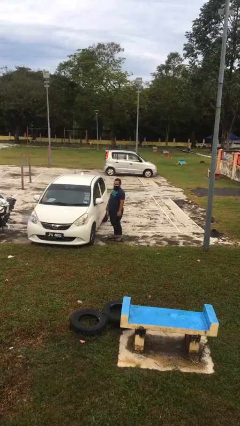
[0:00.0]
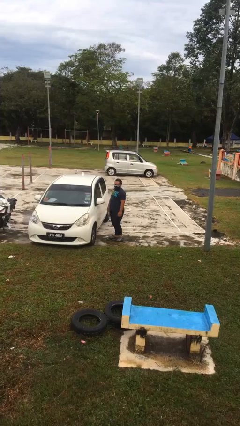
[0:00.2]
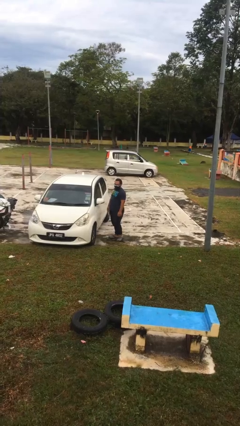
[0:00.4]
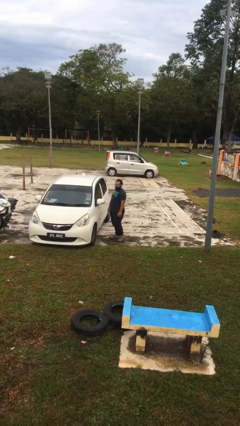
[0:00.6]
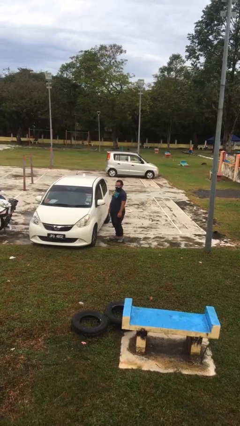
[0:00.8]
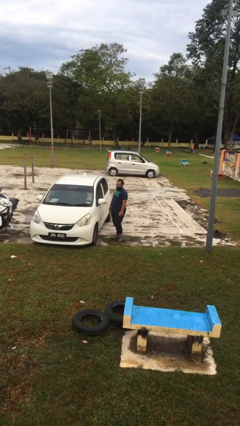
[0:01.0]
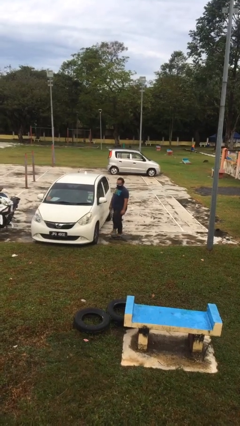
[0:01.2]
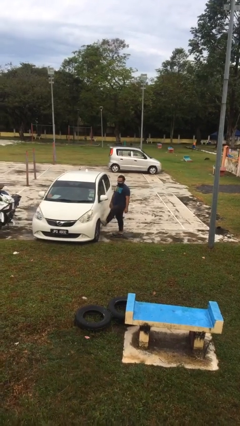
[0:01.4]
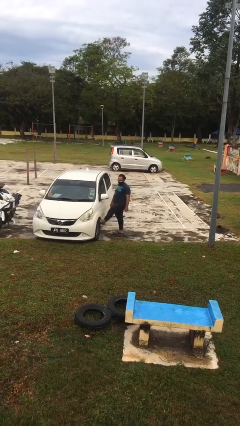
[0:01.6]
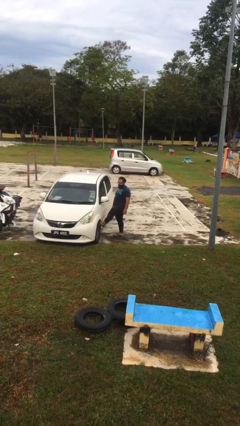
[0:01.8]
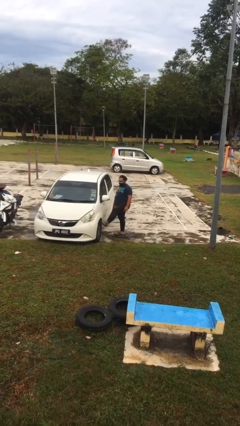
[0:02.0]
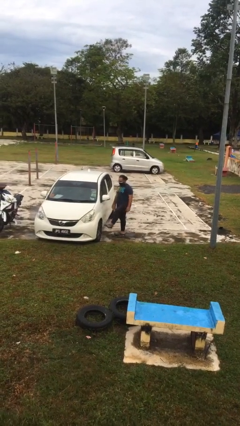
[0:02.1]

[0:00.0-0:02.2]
person kicks car tires

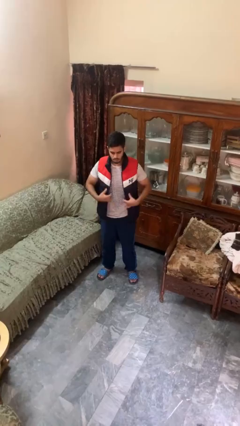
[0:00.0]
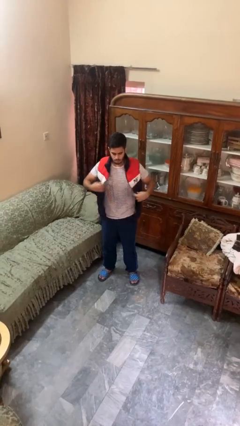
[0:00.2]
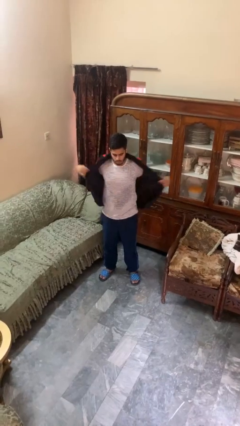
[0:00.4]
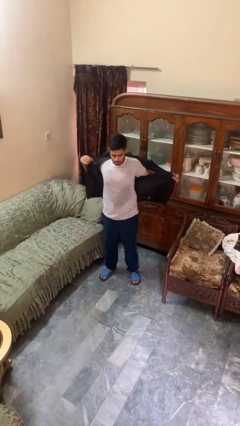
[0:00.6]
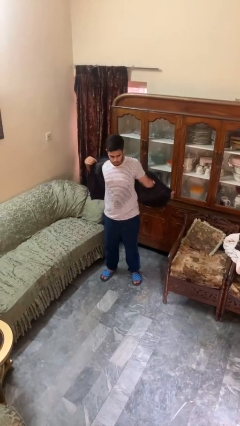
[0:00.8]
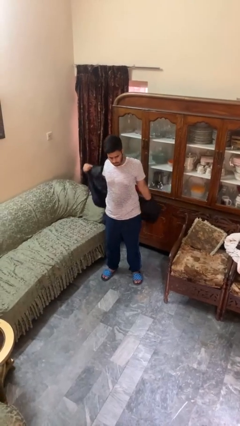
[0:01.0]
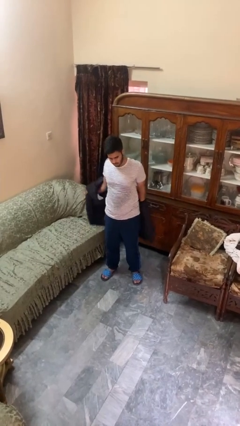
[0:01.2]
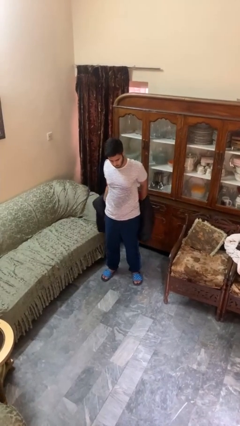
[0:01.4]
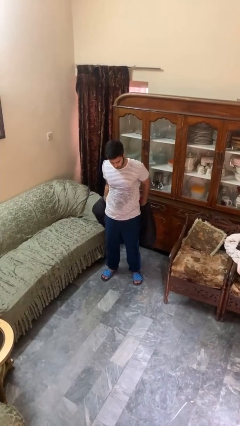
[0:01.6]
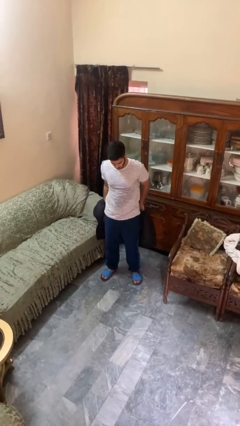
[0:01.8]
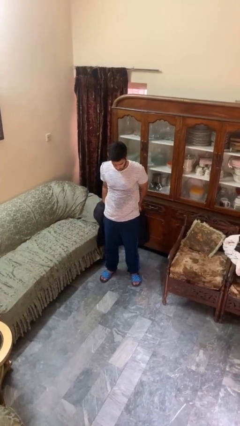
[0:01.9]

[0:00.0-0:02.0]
person takes off jacket

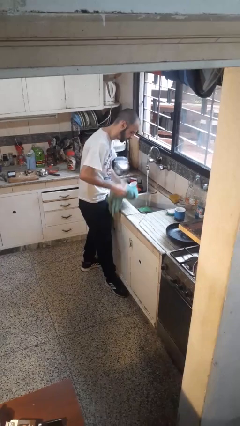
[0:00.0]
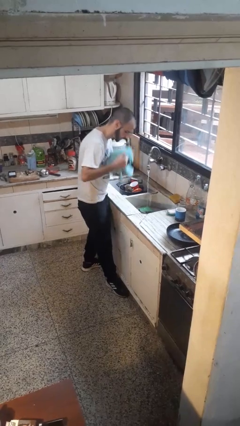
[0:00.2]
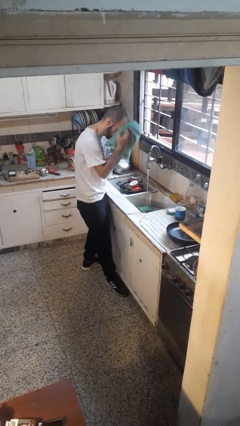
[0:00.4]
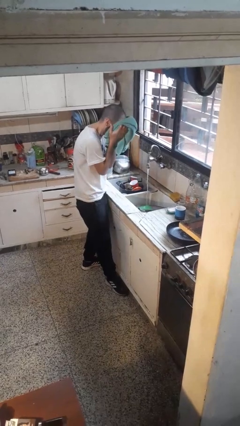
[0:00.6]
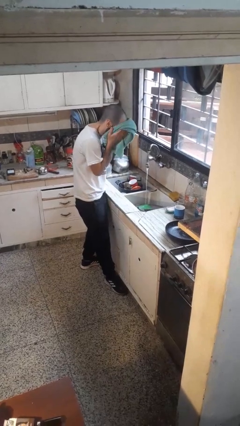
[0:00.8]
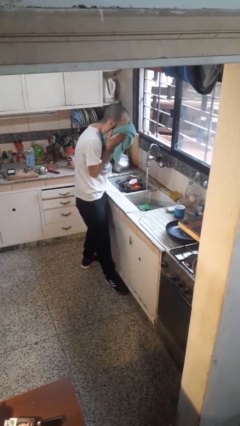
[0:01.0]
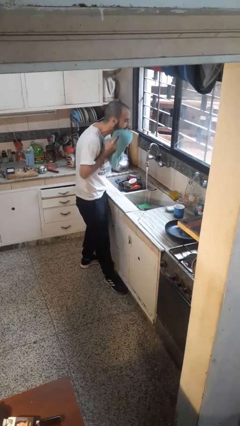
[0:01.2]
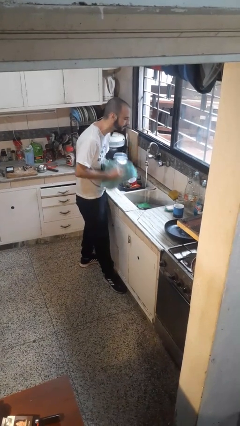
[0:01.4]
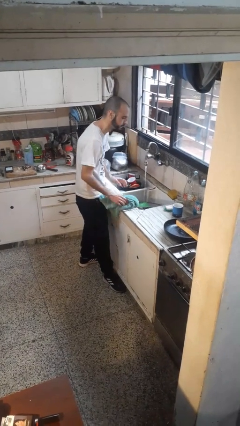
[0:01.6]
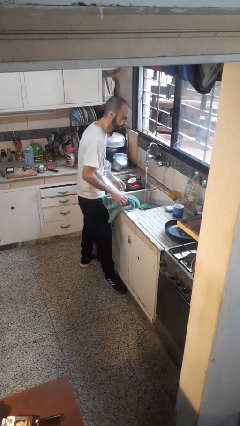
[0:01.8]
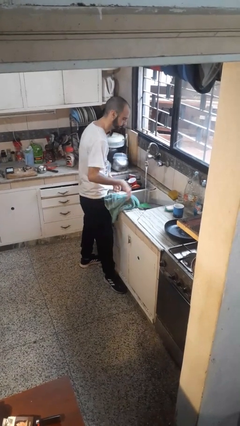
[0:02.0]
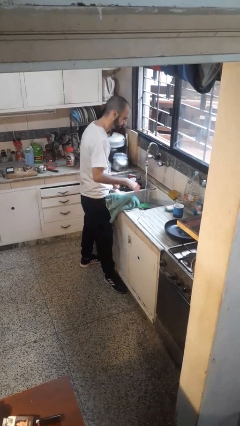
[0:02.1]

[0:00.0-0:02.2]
person dries face with towel

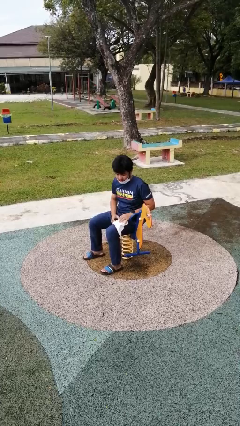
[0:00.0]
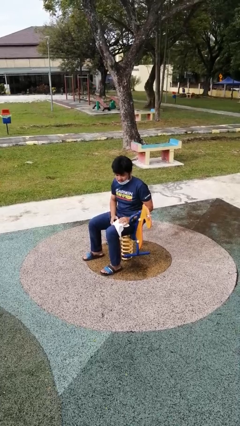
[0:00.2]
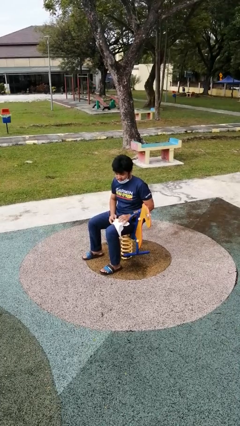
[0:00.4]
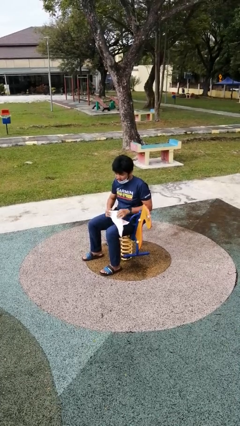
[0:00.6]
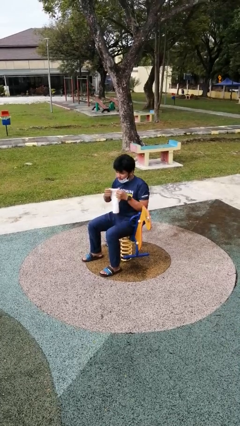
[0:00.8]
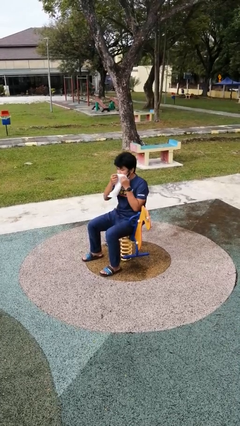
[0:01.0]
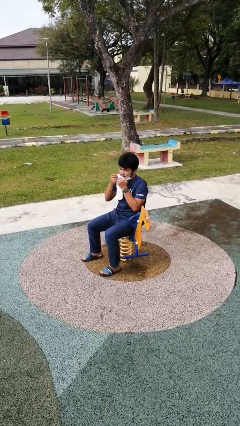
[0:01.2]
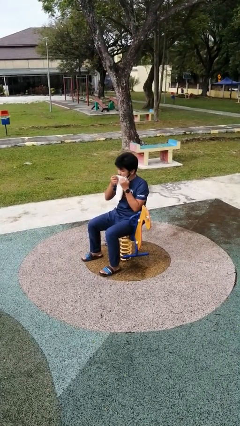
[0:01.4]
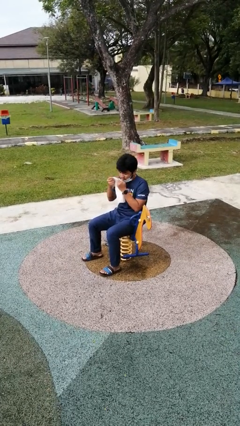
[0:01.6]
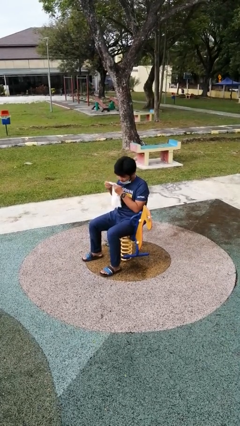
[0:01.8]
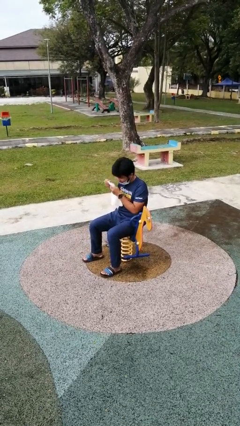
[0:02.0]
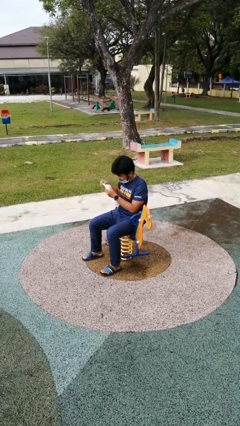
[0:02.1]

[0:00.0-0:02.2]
person wipes mouth with napkin

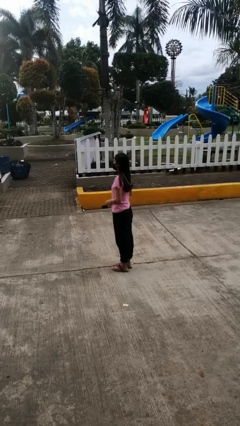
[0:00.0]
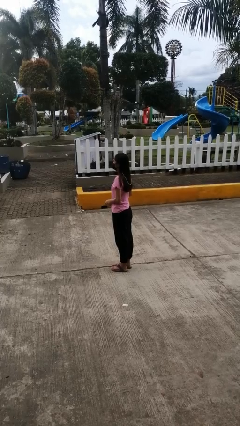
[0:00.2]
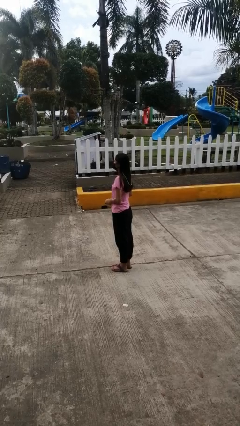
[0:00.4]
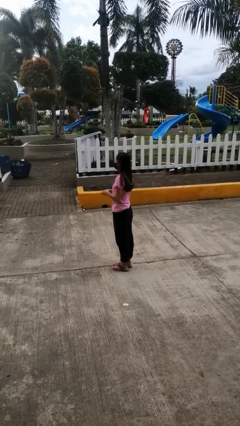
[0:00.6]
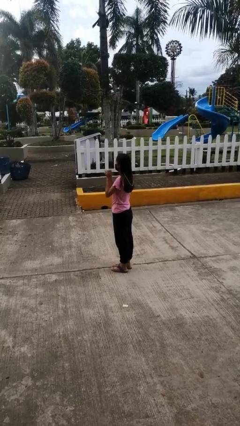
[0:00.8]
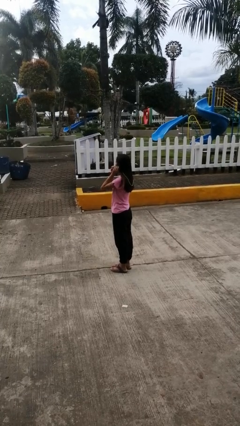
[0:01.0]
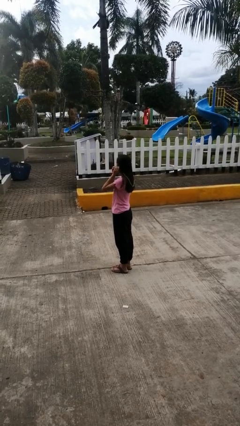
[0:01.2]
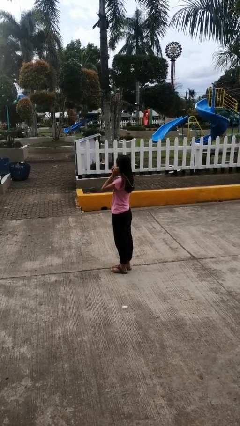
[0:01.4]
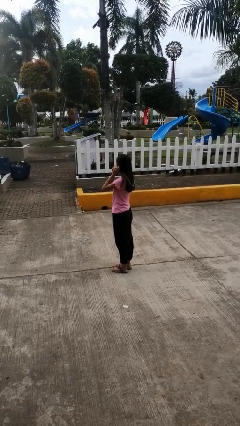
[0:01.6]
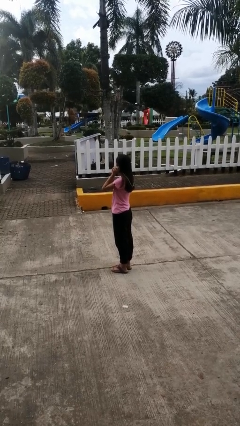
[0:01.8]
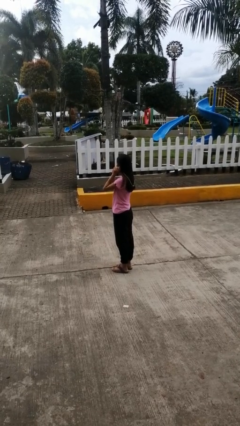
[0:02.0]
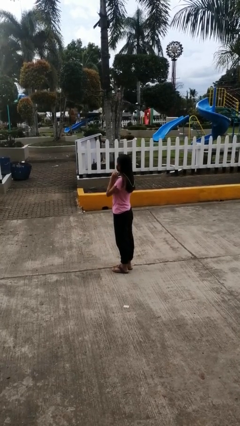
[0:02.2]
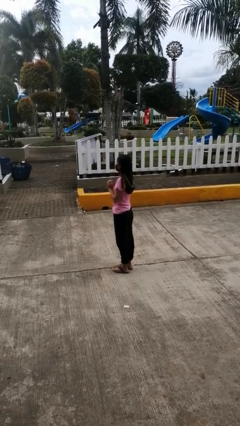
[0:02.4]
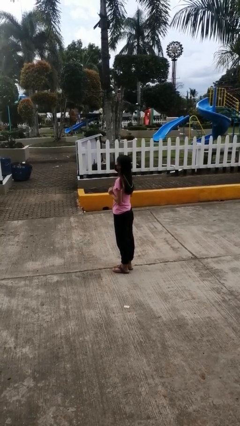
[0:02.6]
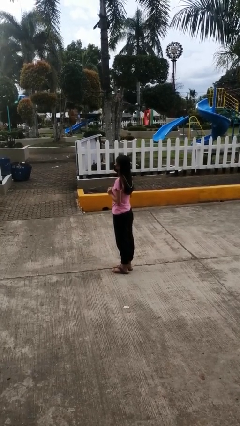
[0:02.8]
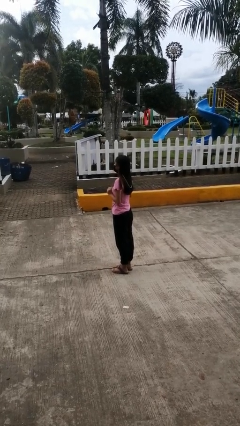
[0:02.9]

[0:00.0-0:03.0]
person puts on earrings

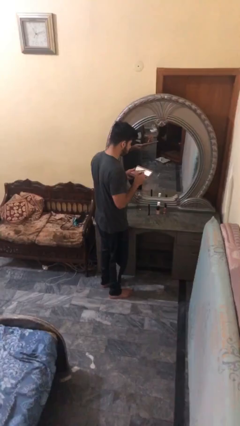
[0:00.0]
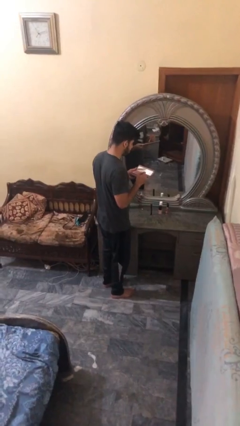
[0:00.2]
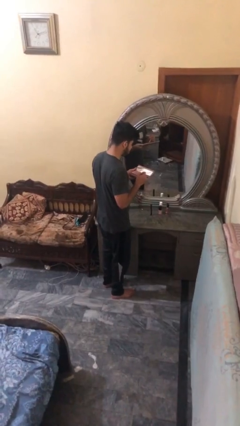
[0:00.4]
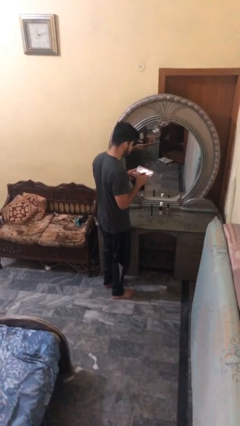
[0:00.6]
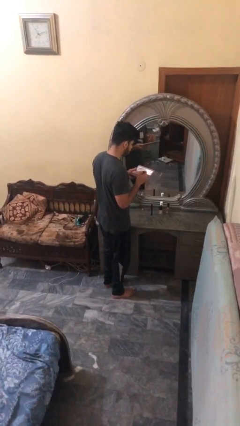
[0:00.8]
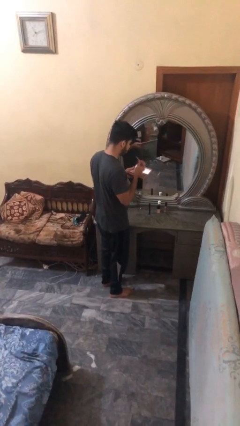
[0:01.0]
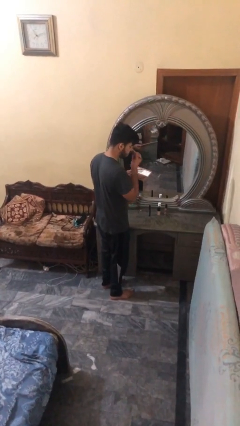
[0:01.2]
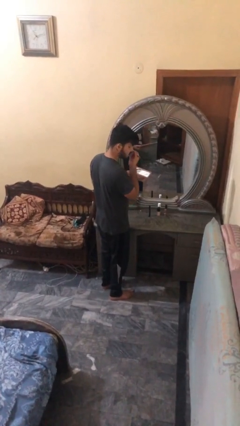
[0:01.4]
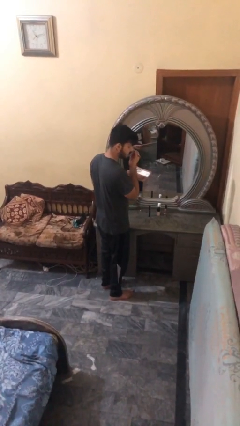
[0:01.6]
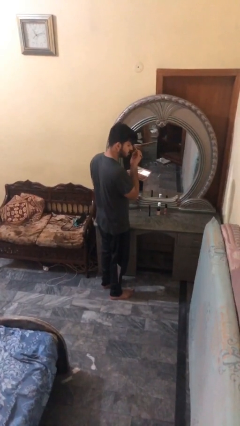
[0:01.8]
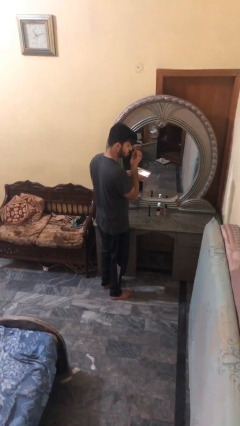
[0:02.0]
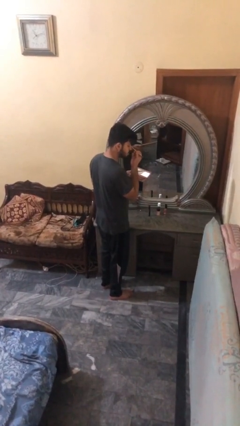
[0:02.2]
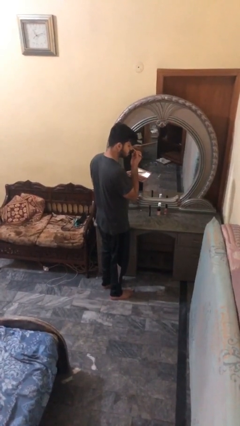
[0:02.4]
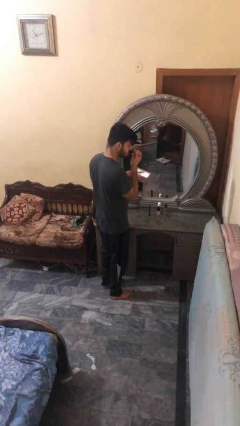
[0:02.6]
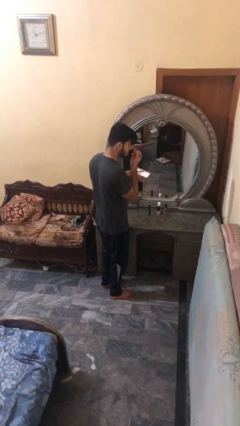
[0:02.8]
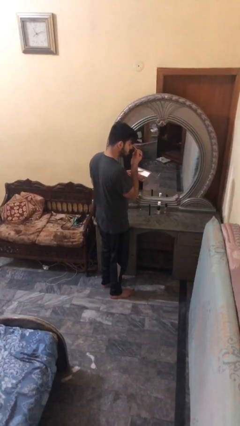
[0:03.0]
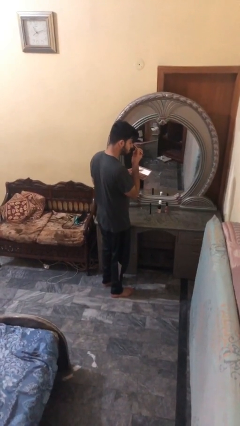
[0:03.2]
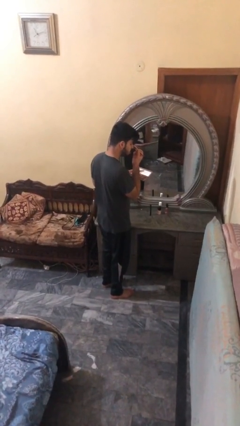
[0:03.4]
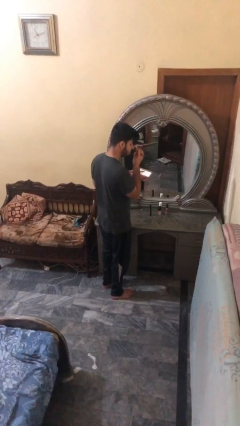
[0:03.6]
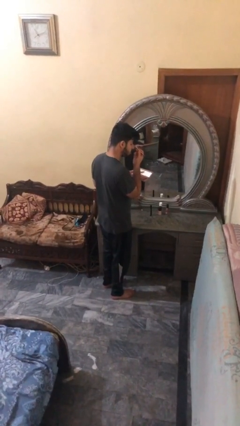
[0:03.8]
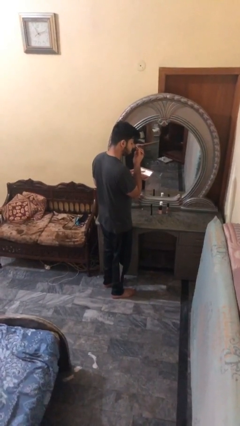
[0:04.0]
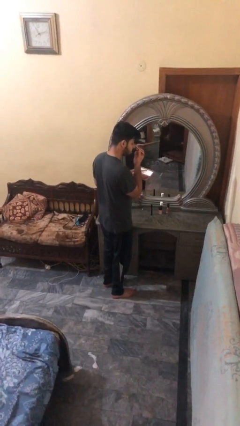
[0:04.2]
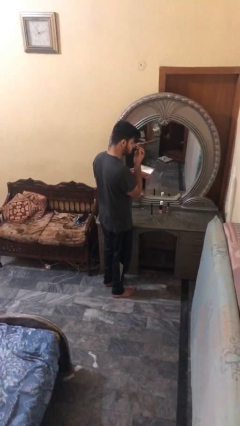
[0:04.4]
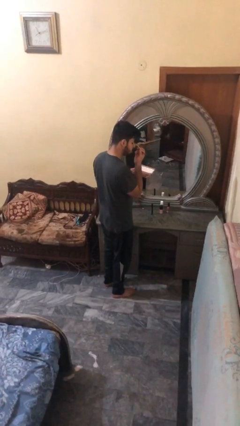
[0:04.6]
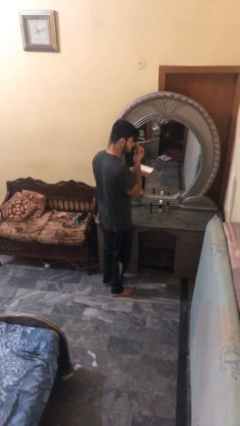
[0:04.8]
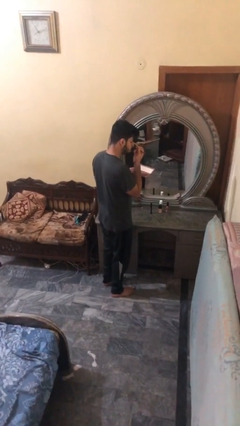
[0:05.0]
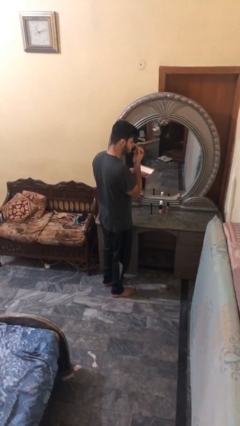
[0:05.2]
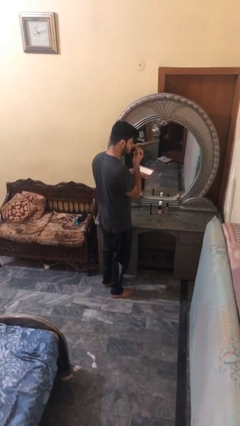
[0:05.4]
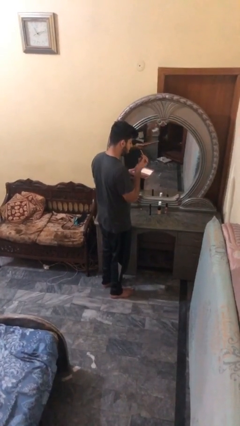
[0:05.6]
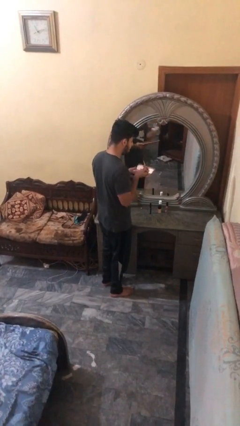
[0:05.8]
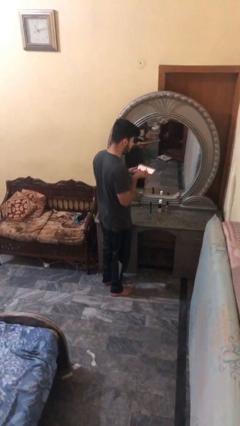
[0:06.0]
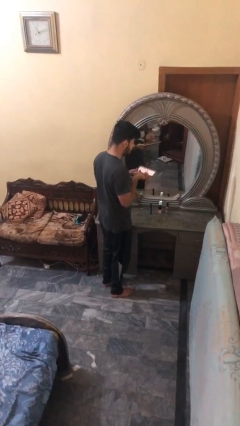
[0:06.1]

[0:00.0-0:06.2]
person applies eye makeup
